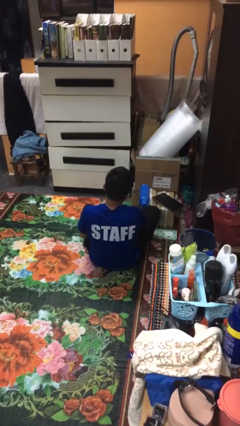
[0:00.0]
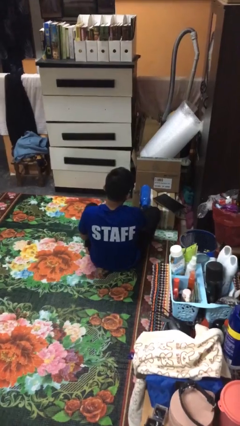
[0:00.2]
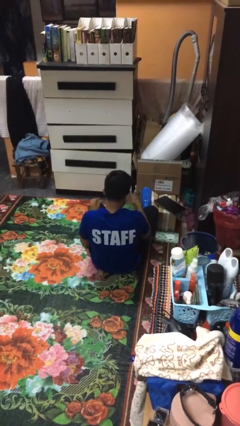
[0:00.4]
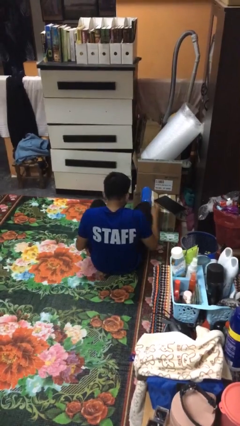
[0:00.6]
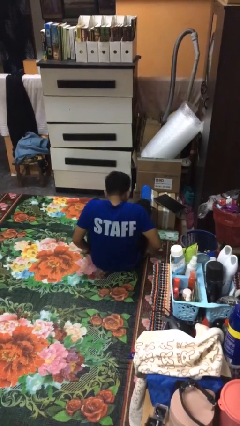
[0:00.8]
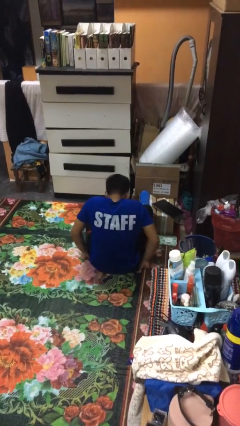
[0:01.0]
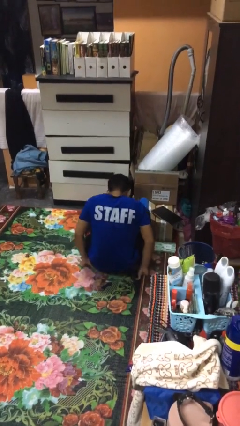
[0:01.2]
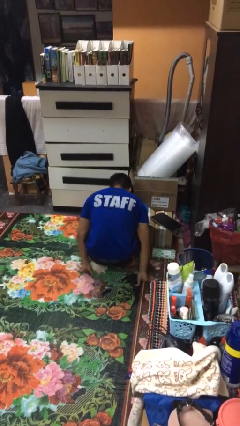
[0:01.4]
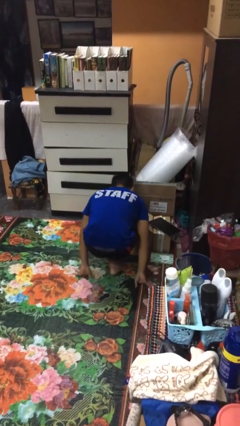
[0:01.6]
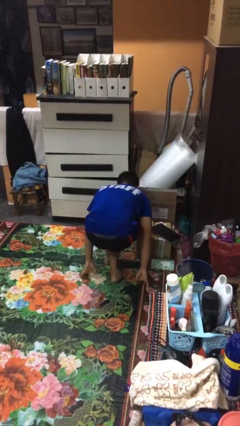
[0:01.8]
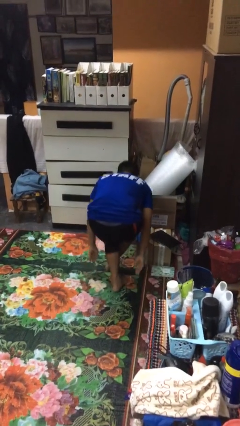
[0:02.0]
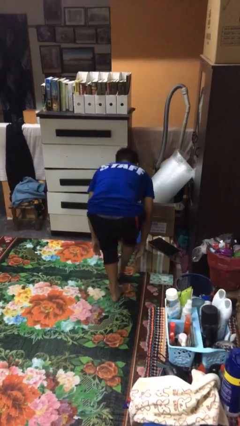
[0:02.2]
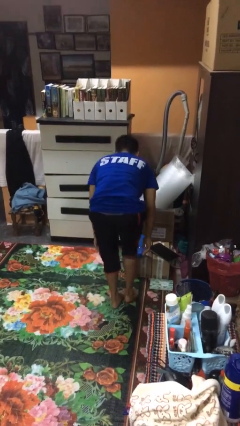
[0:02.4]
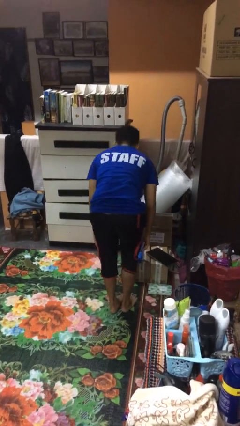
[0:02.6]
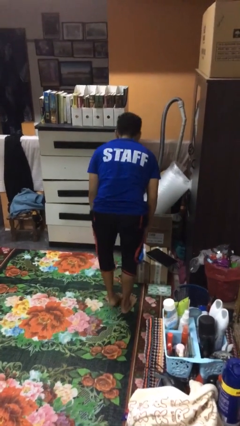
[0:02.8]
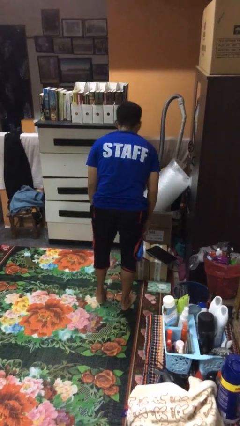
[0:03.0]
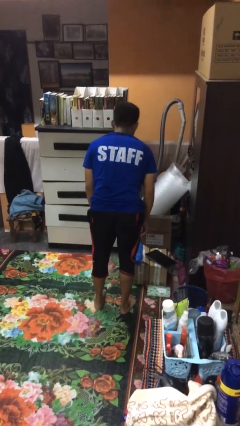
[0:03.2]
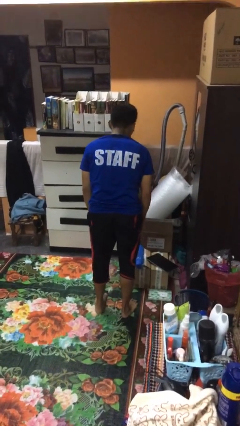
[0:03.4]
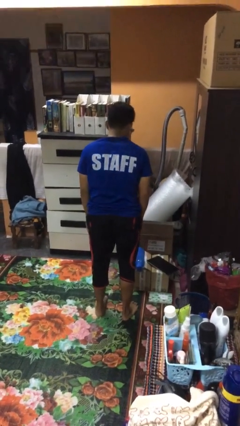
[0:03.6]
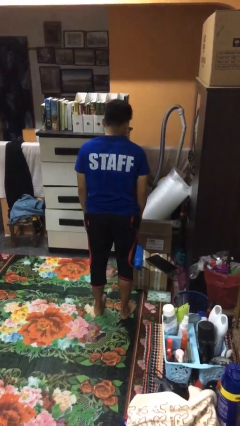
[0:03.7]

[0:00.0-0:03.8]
person stands up from floor

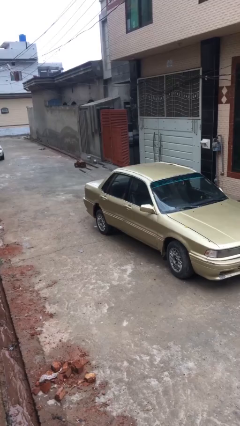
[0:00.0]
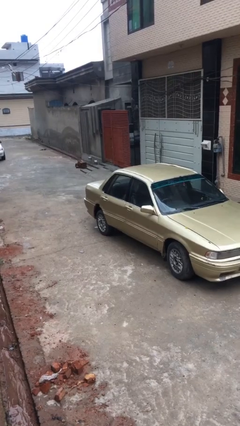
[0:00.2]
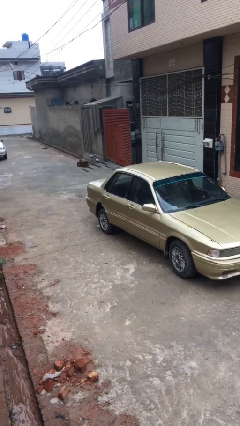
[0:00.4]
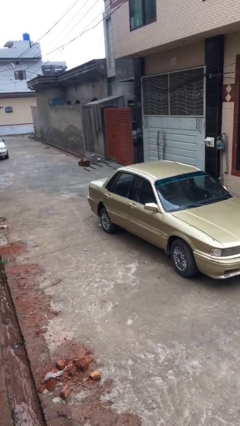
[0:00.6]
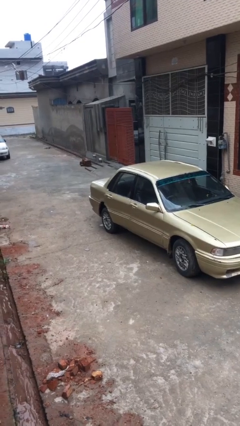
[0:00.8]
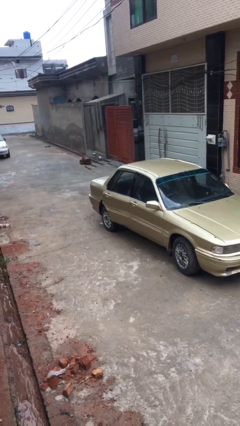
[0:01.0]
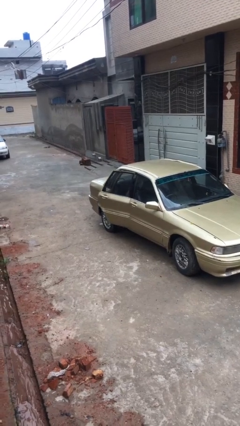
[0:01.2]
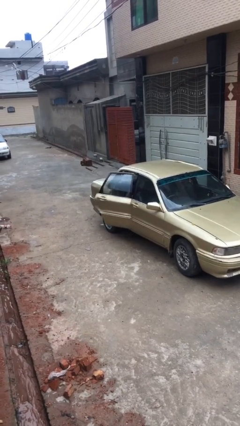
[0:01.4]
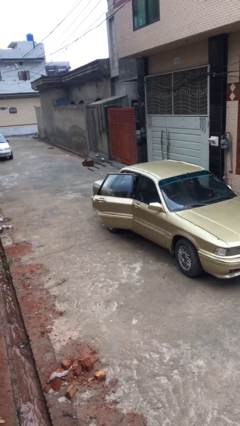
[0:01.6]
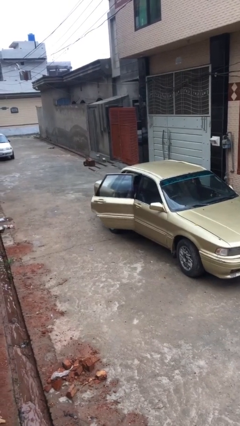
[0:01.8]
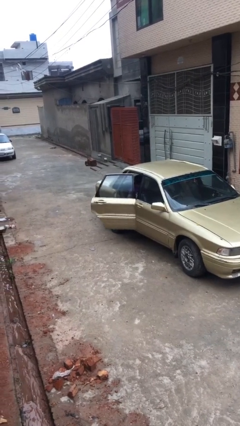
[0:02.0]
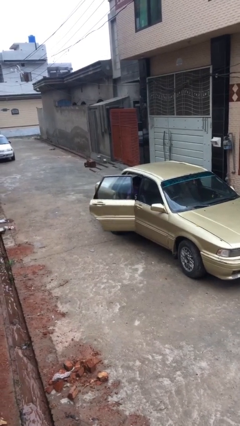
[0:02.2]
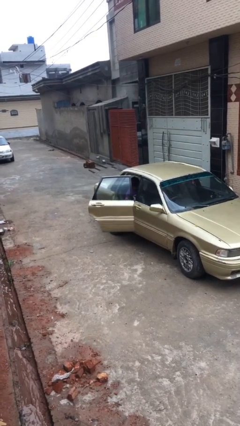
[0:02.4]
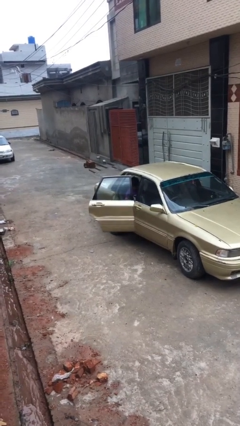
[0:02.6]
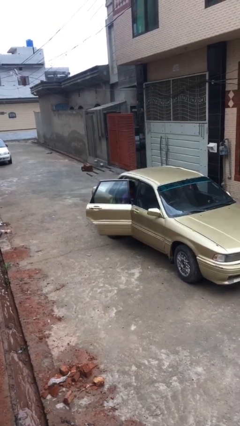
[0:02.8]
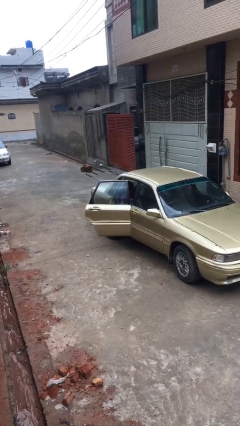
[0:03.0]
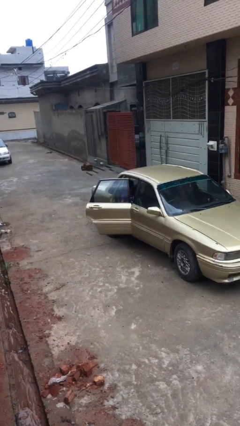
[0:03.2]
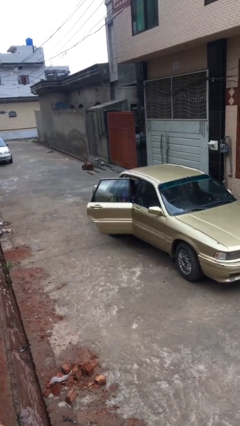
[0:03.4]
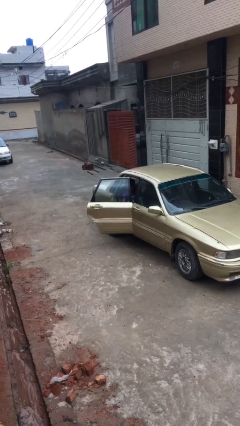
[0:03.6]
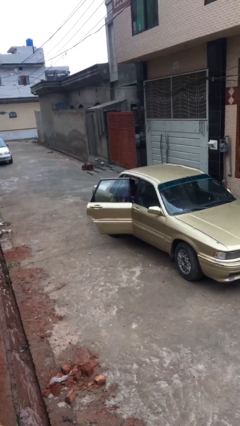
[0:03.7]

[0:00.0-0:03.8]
person opens car door

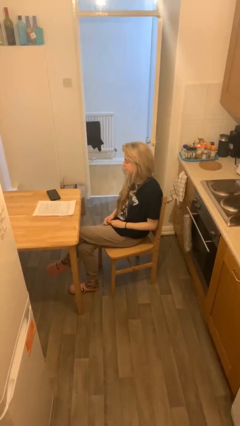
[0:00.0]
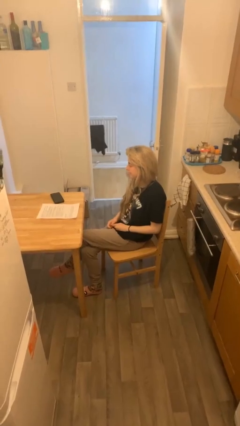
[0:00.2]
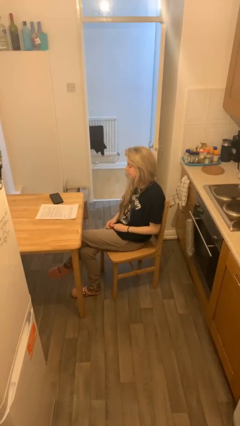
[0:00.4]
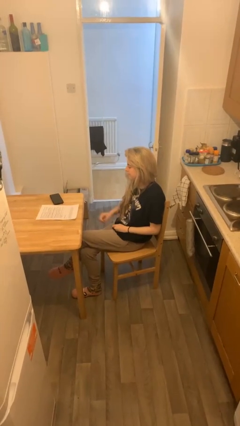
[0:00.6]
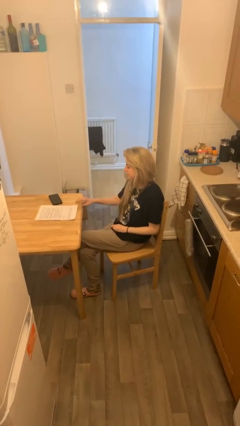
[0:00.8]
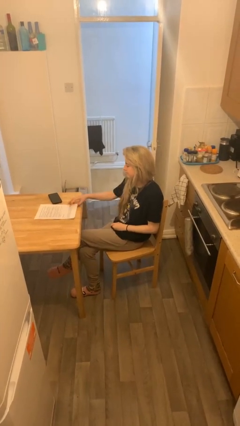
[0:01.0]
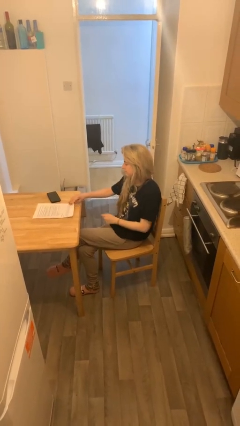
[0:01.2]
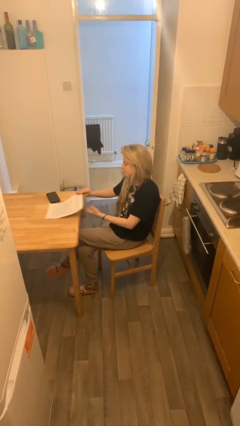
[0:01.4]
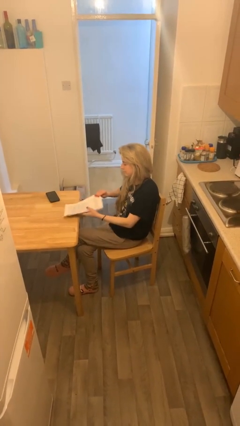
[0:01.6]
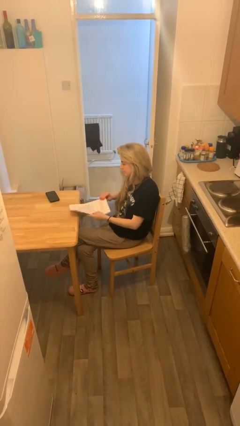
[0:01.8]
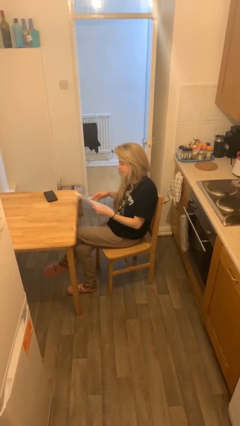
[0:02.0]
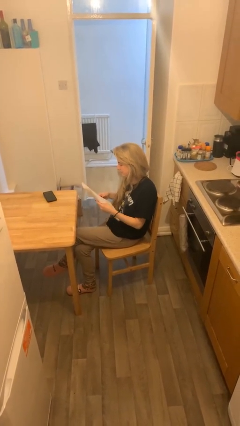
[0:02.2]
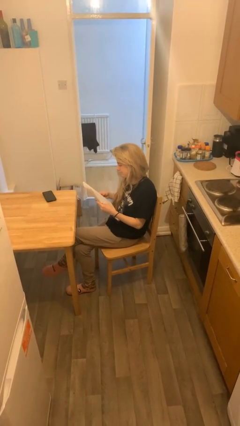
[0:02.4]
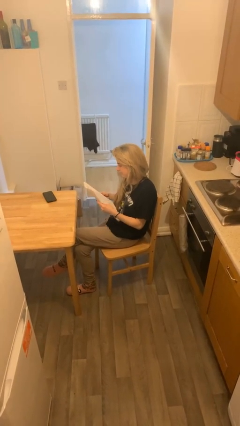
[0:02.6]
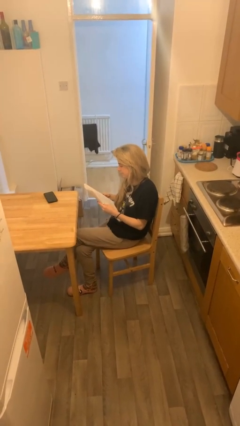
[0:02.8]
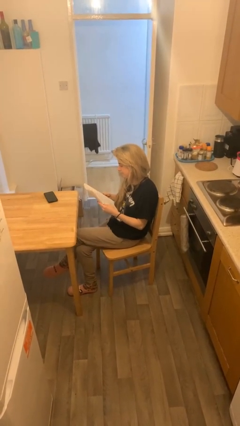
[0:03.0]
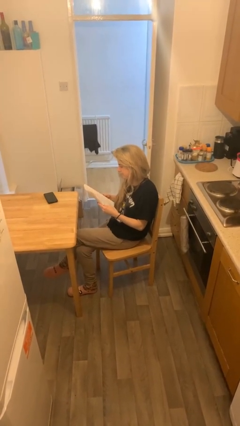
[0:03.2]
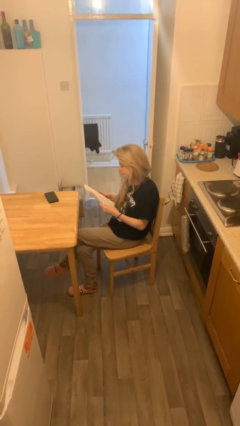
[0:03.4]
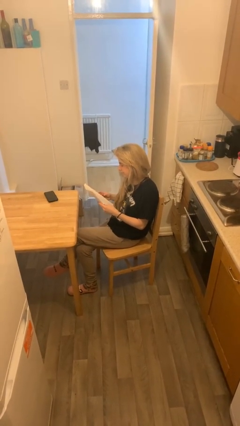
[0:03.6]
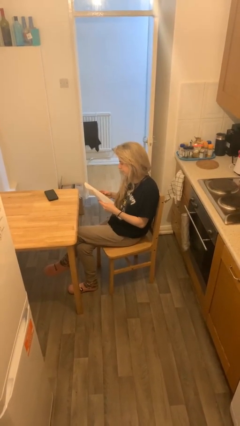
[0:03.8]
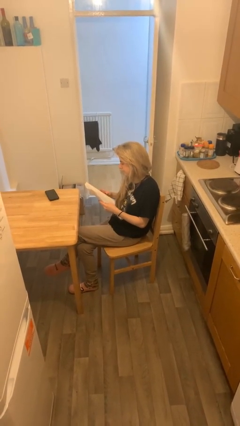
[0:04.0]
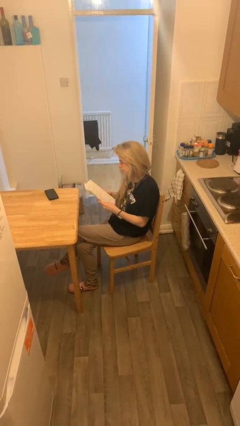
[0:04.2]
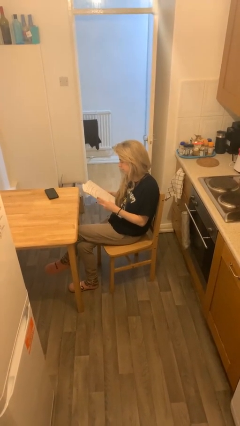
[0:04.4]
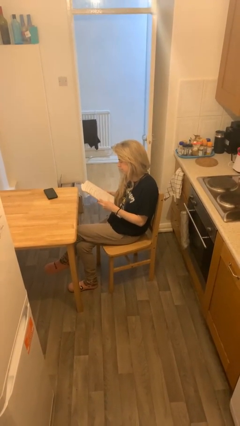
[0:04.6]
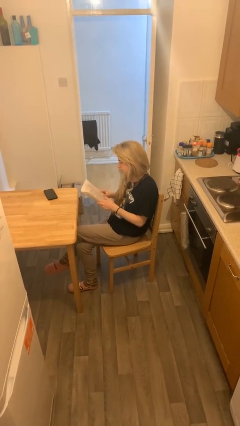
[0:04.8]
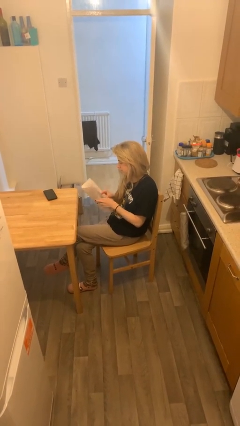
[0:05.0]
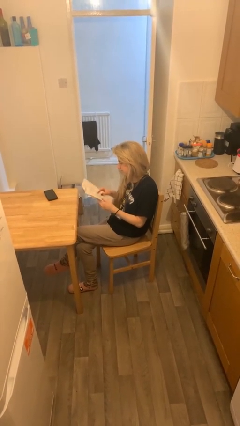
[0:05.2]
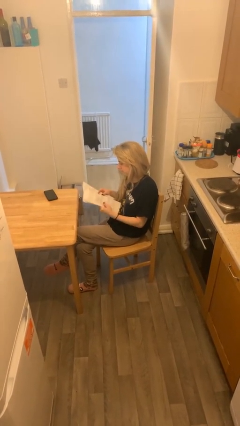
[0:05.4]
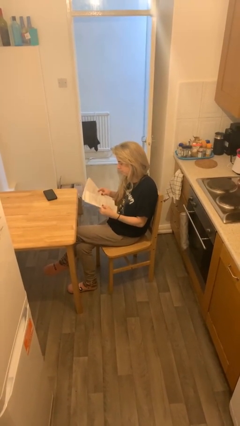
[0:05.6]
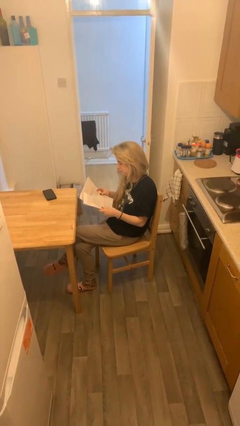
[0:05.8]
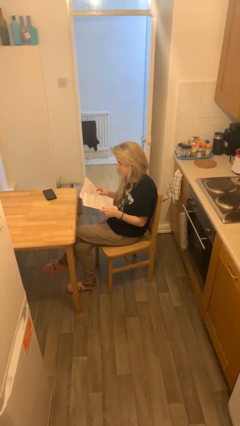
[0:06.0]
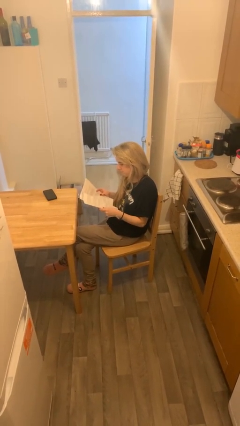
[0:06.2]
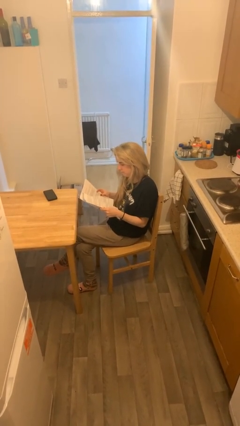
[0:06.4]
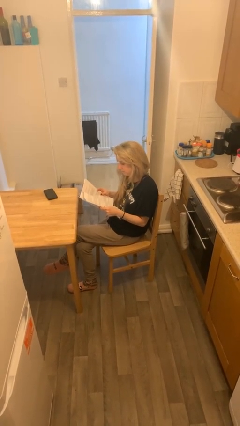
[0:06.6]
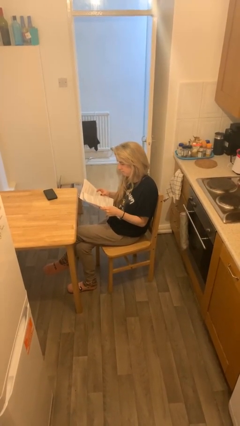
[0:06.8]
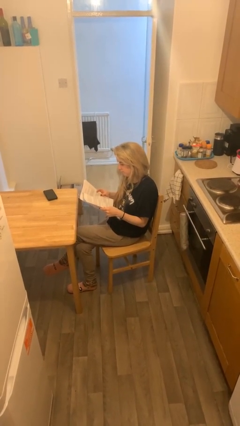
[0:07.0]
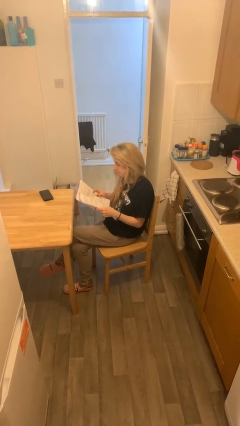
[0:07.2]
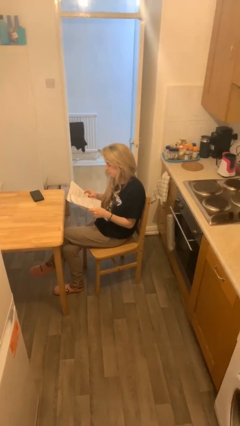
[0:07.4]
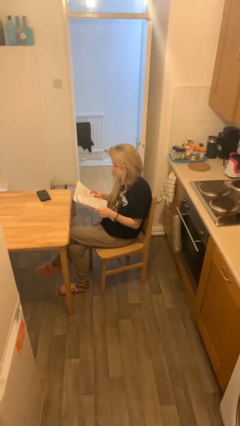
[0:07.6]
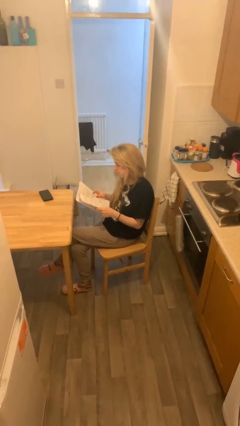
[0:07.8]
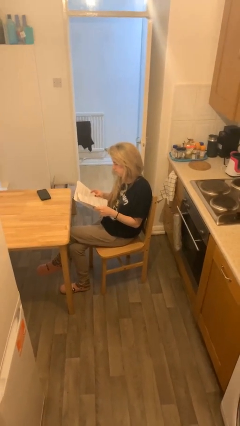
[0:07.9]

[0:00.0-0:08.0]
person reads document

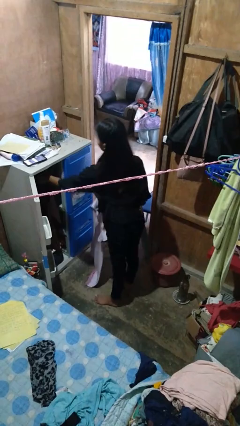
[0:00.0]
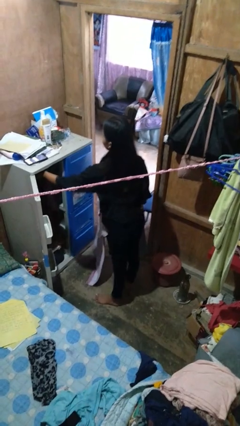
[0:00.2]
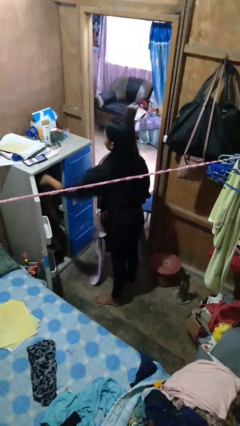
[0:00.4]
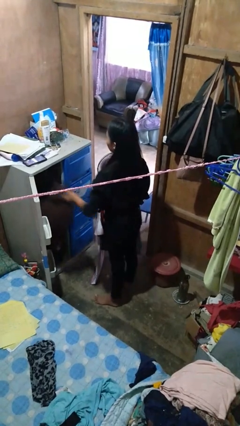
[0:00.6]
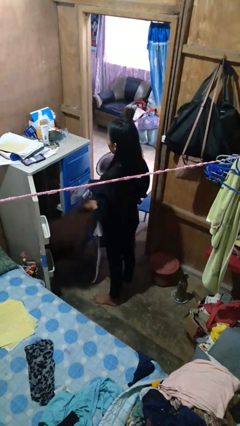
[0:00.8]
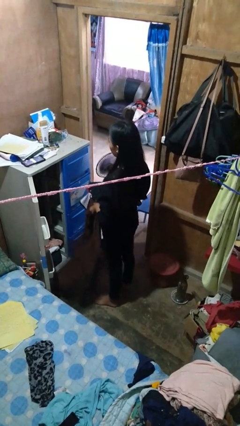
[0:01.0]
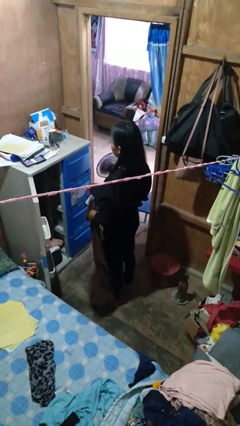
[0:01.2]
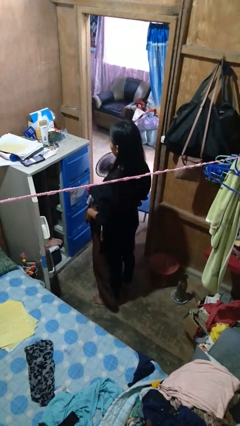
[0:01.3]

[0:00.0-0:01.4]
person takes clothes from closet

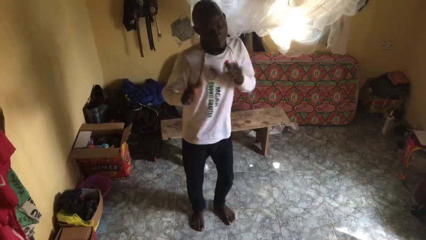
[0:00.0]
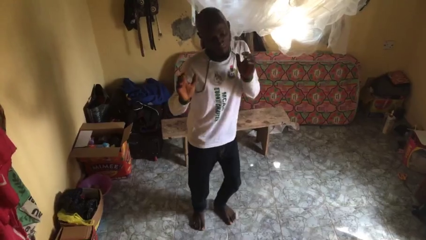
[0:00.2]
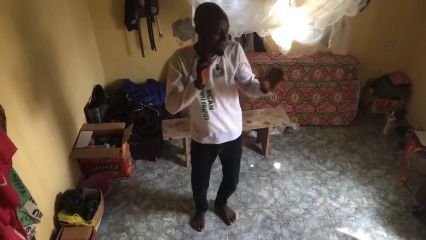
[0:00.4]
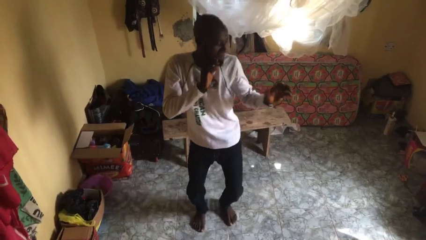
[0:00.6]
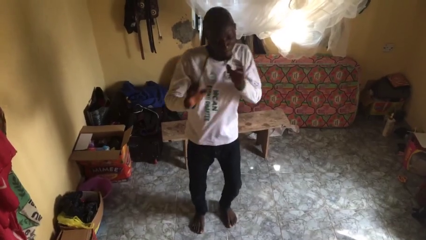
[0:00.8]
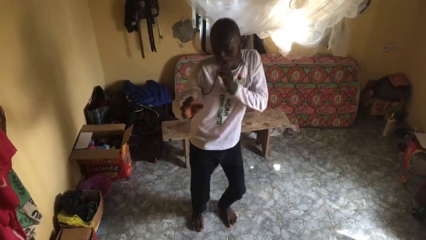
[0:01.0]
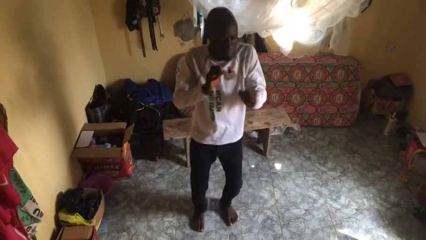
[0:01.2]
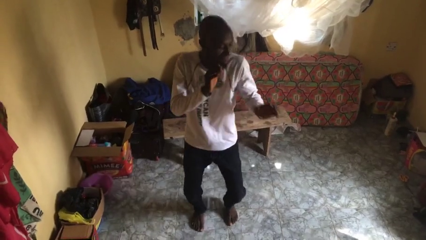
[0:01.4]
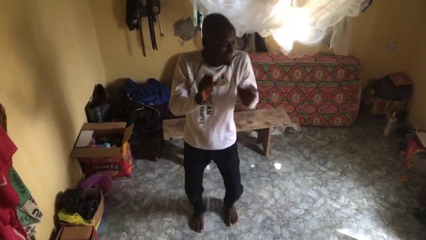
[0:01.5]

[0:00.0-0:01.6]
person dances in place
